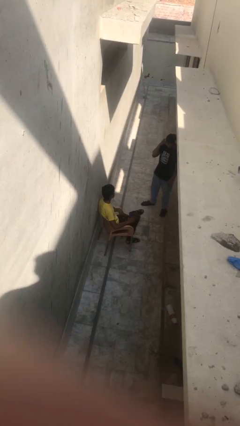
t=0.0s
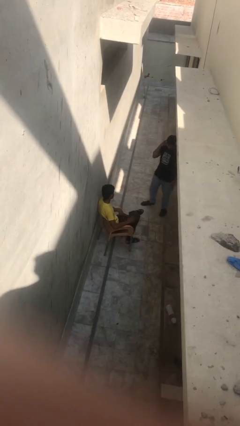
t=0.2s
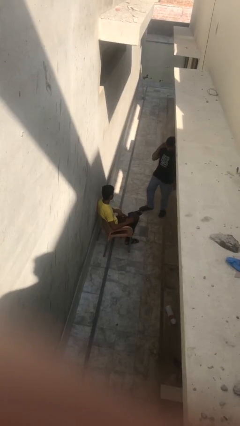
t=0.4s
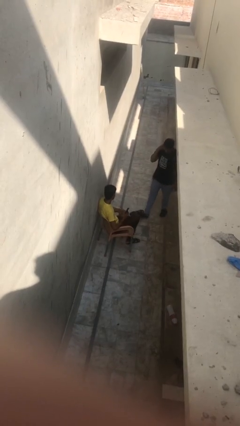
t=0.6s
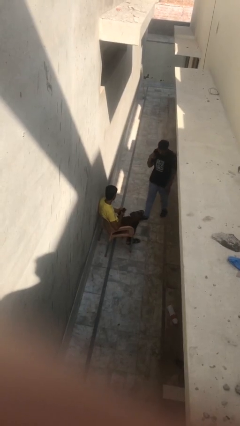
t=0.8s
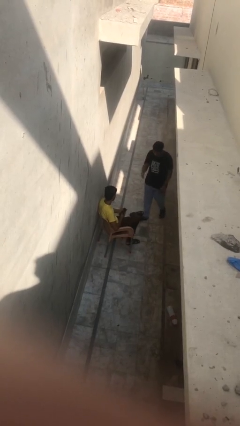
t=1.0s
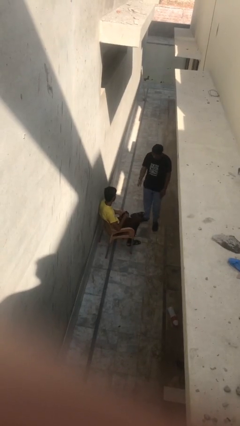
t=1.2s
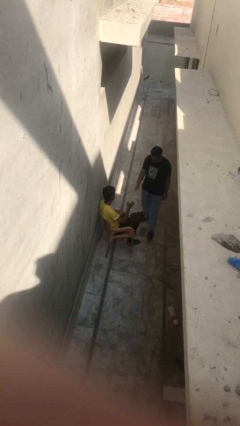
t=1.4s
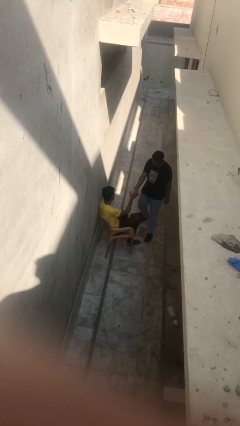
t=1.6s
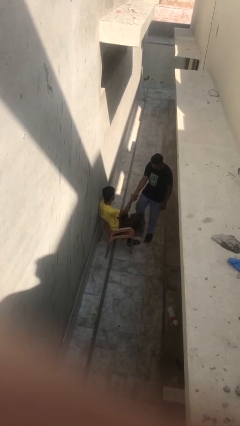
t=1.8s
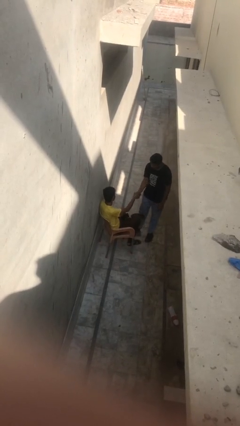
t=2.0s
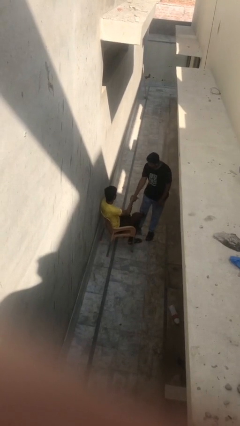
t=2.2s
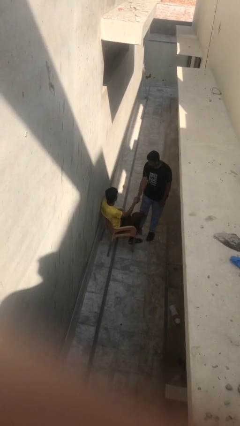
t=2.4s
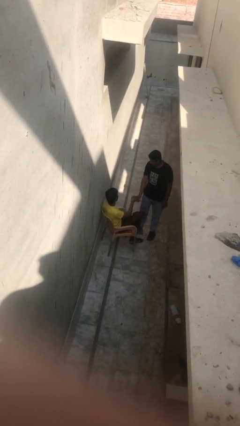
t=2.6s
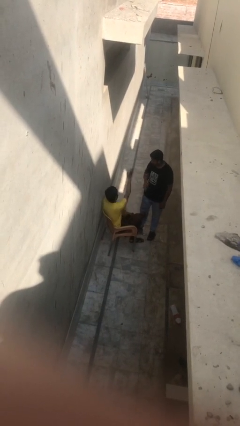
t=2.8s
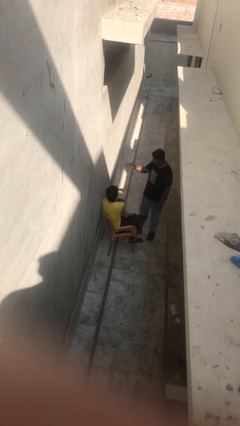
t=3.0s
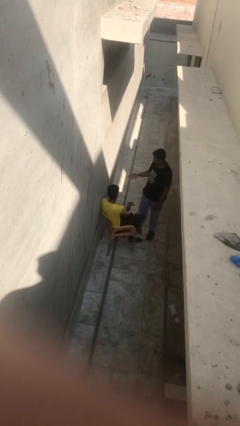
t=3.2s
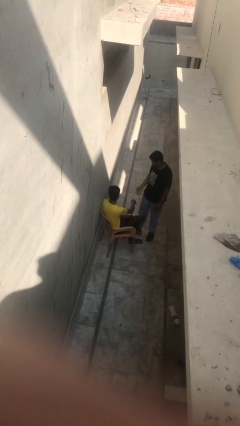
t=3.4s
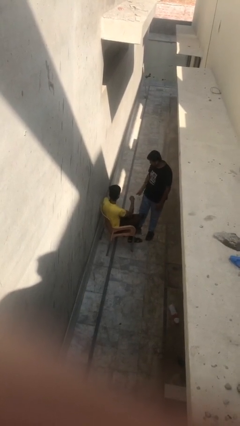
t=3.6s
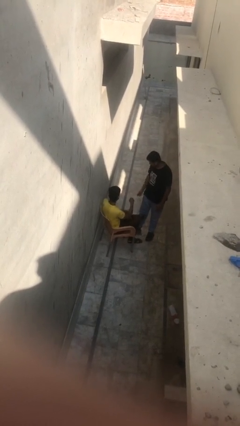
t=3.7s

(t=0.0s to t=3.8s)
person shakes hand

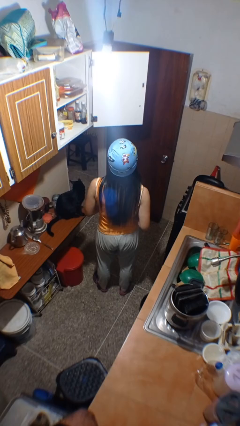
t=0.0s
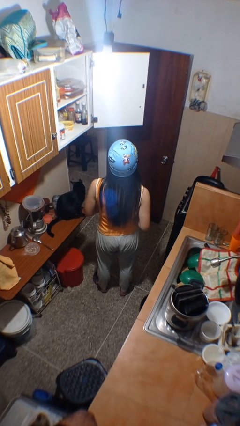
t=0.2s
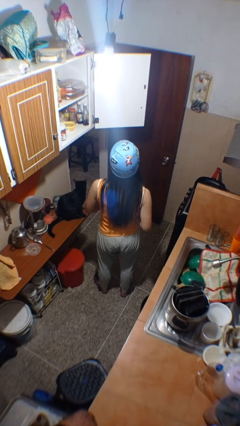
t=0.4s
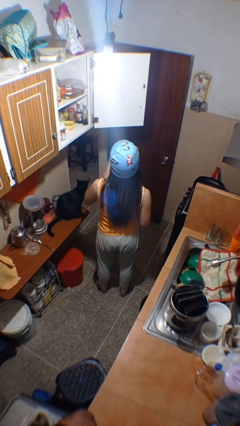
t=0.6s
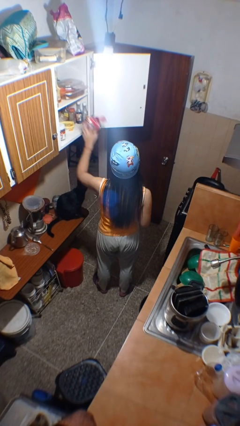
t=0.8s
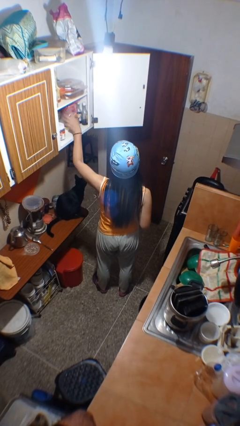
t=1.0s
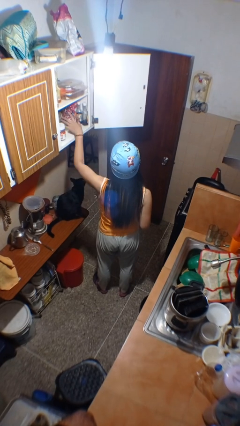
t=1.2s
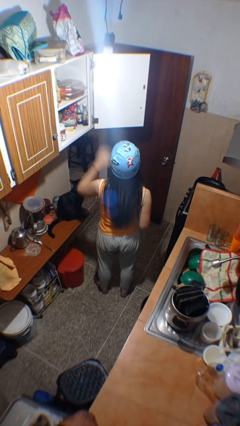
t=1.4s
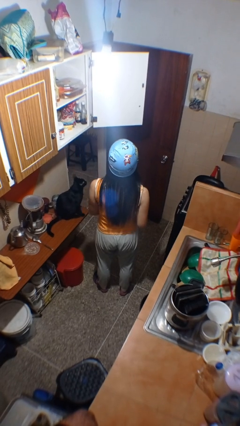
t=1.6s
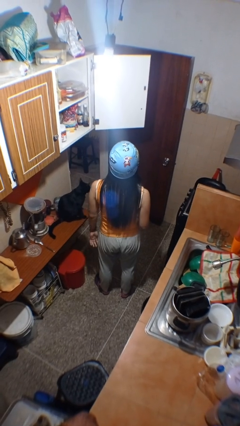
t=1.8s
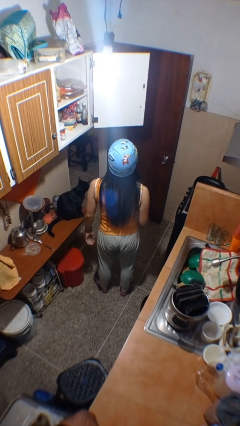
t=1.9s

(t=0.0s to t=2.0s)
person puts down object into cabinet

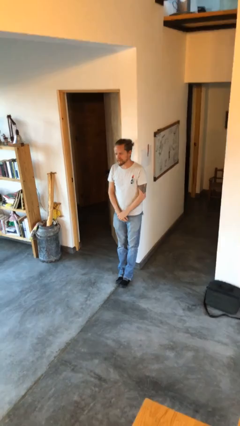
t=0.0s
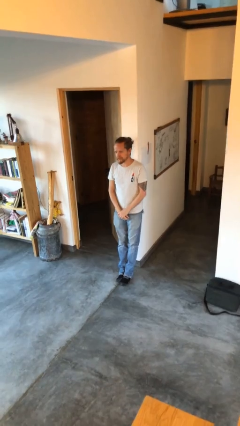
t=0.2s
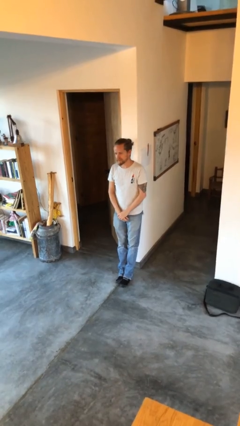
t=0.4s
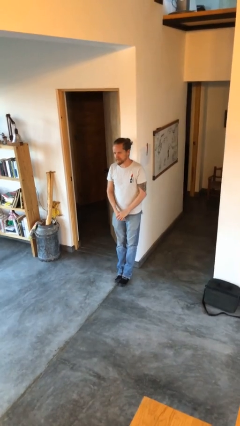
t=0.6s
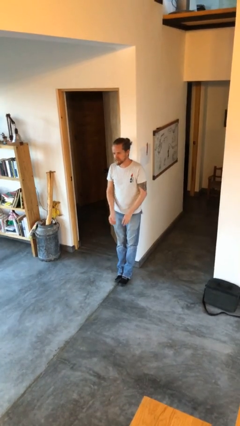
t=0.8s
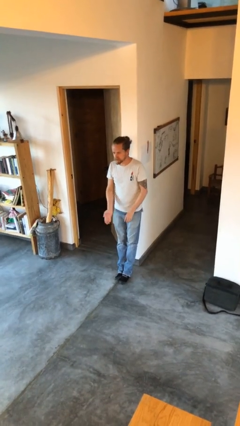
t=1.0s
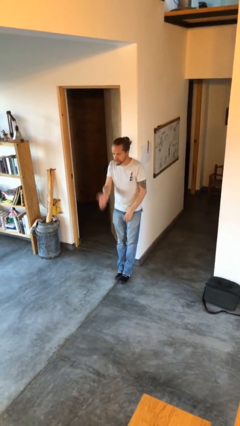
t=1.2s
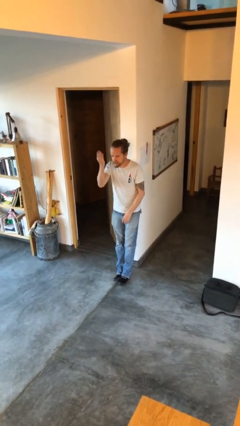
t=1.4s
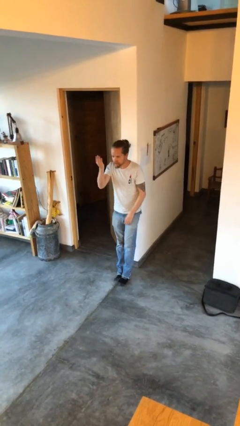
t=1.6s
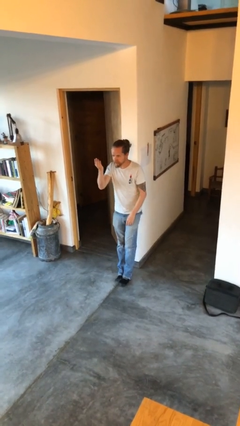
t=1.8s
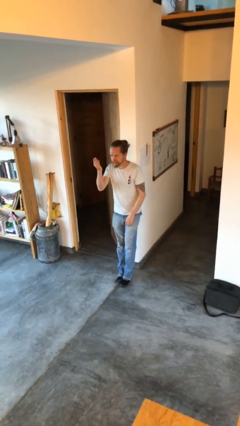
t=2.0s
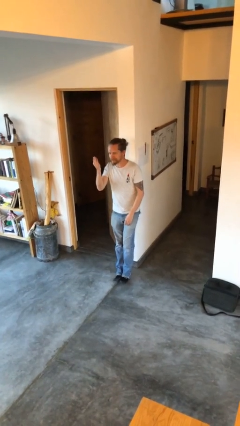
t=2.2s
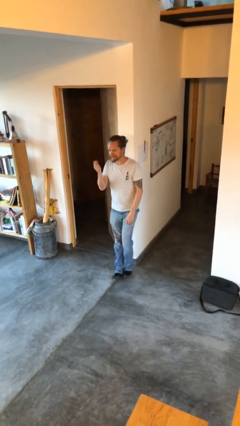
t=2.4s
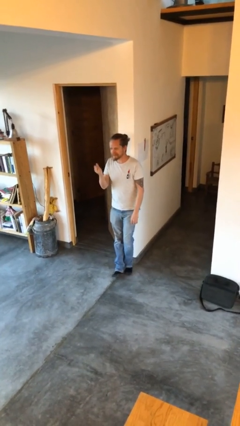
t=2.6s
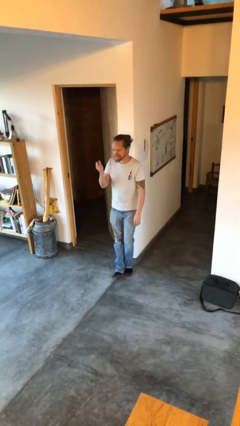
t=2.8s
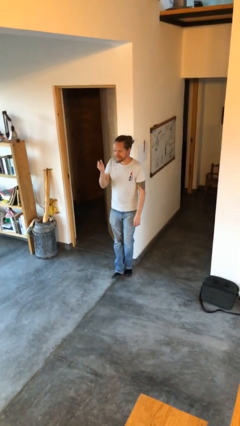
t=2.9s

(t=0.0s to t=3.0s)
person gestures swipe up

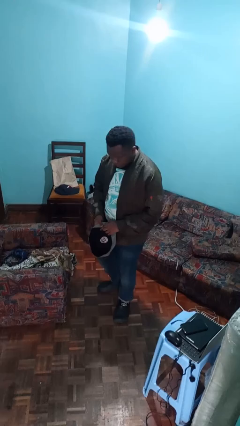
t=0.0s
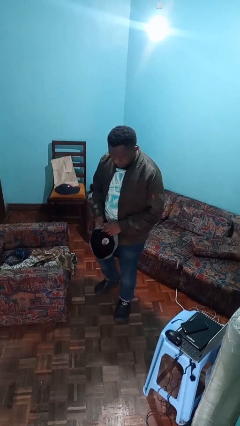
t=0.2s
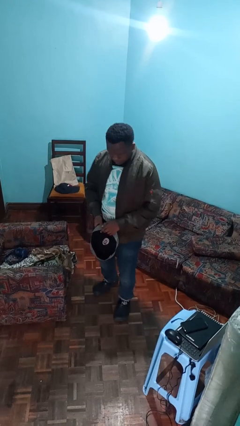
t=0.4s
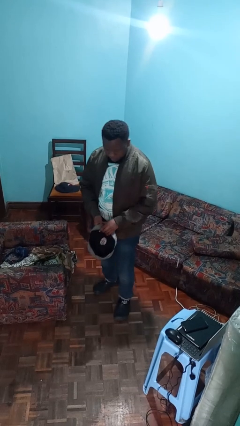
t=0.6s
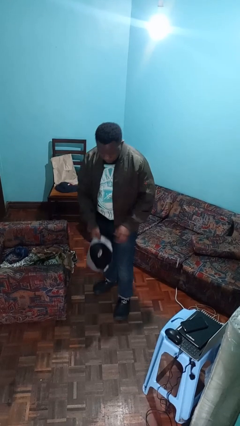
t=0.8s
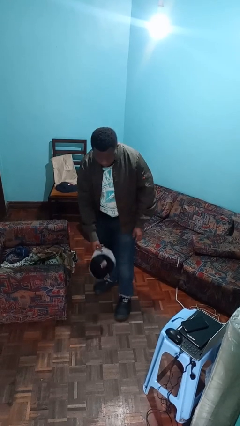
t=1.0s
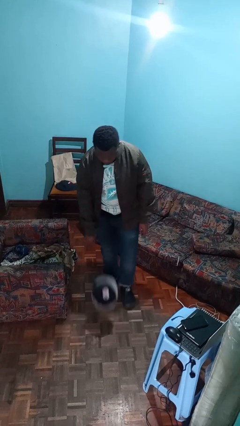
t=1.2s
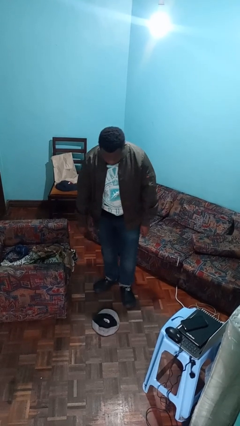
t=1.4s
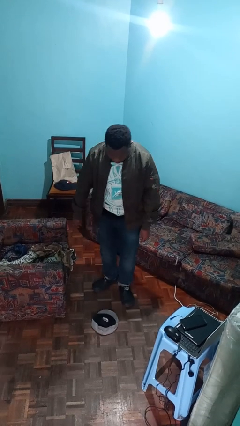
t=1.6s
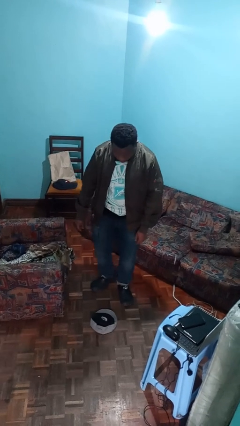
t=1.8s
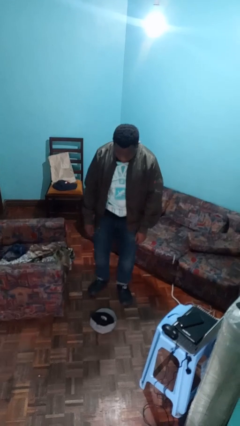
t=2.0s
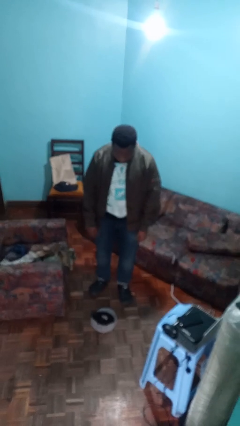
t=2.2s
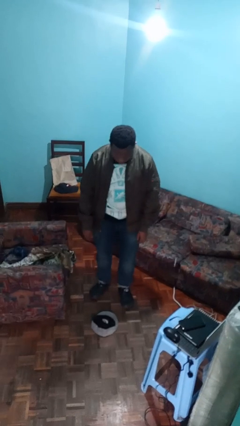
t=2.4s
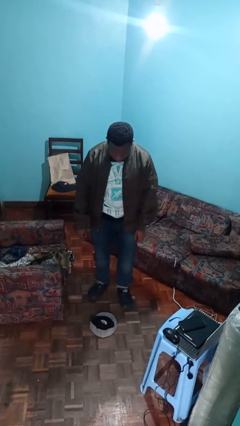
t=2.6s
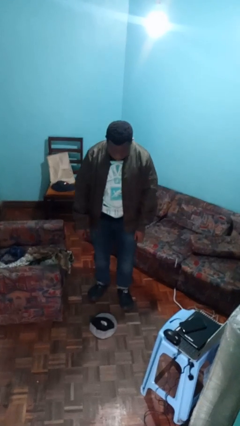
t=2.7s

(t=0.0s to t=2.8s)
person drops object

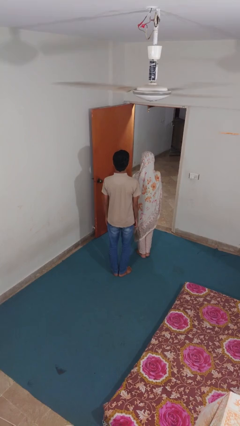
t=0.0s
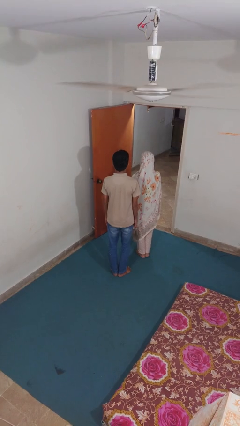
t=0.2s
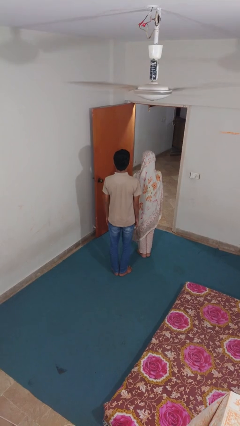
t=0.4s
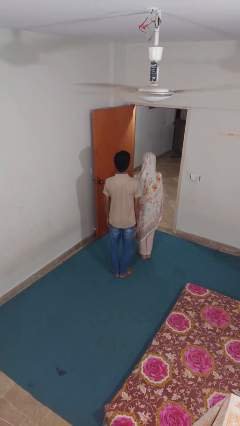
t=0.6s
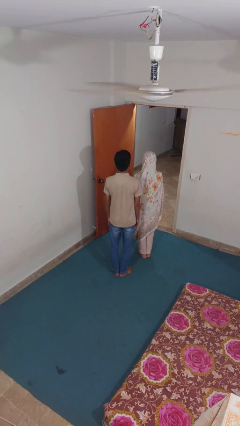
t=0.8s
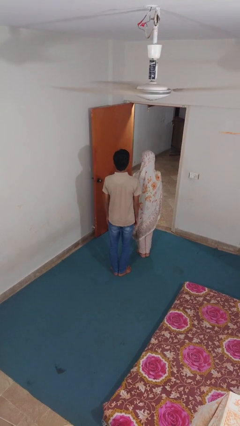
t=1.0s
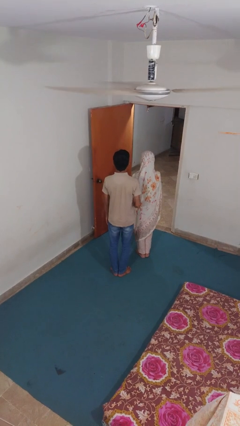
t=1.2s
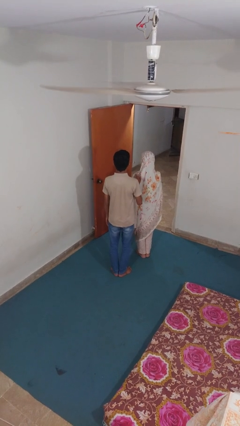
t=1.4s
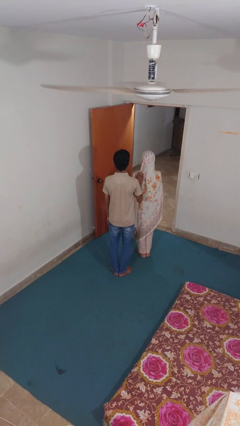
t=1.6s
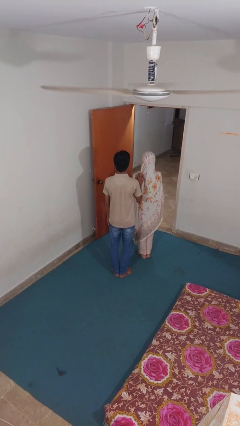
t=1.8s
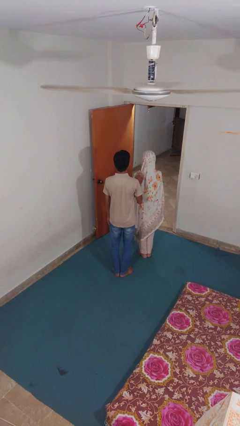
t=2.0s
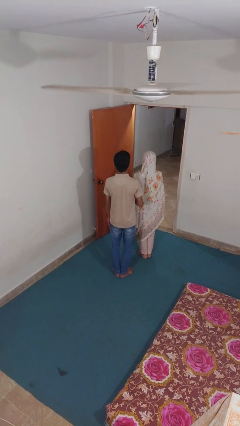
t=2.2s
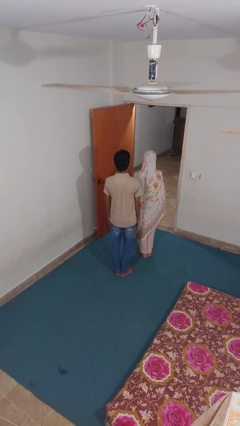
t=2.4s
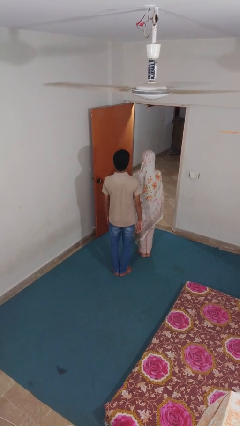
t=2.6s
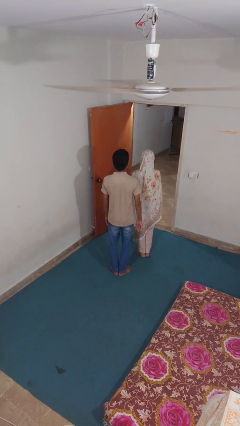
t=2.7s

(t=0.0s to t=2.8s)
person touches back of person

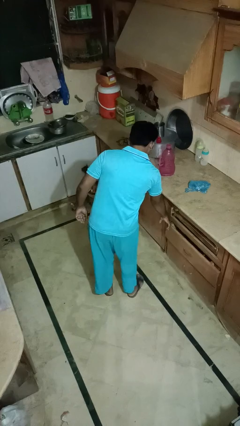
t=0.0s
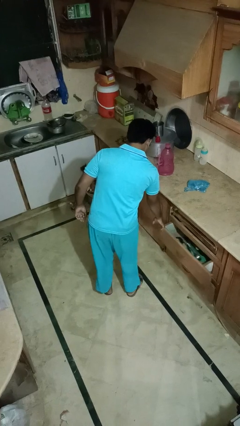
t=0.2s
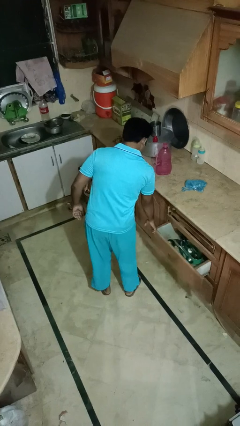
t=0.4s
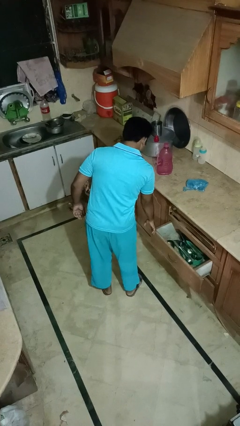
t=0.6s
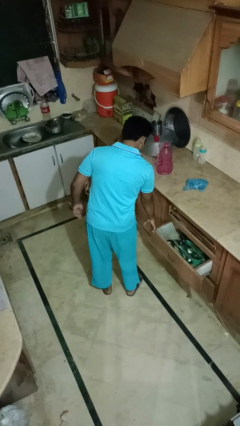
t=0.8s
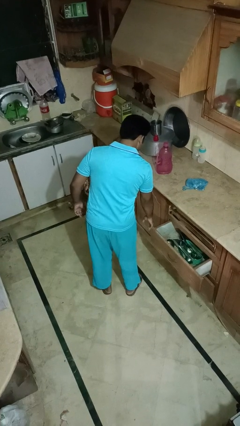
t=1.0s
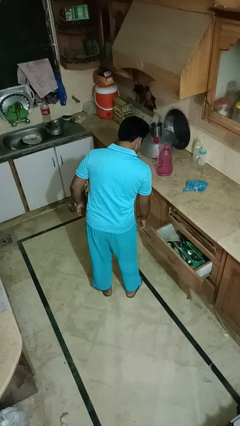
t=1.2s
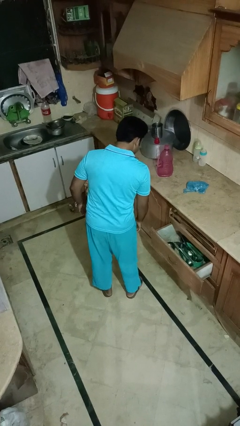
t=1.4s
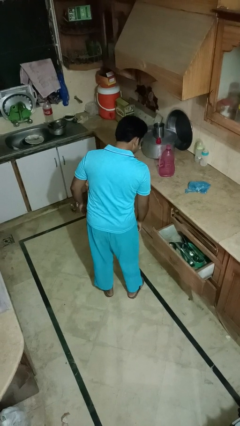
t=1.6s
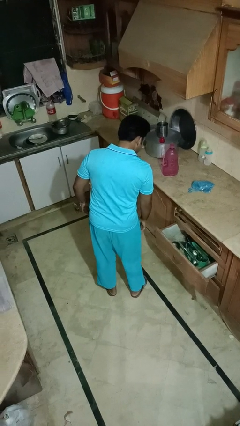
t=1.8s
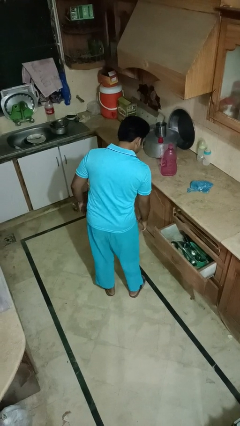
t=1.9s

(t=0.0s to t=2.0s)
person opens kitchen drawer

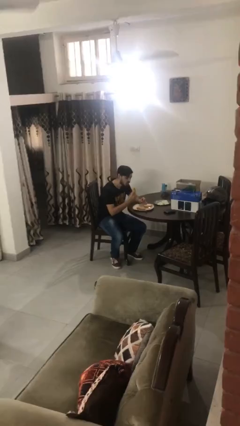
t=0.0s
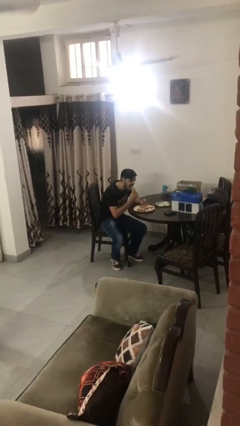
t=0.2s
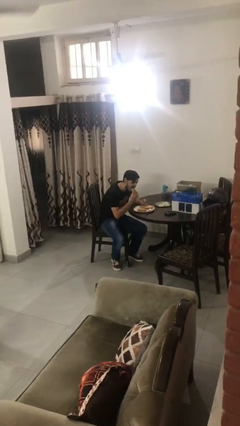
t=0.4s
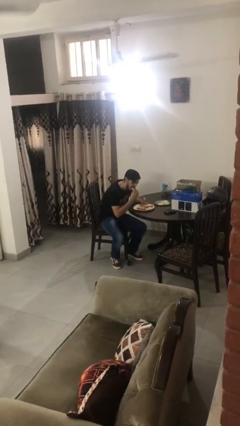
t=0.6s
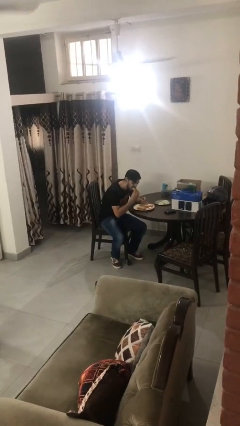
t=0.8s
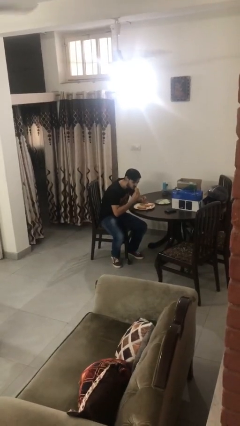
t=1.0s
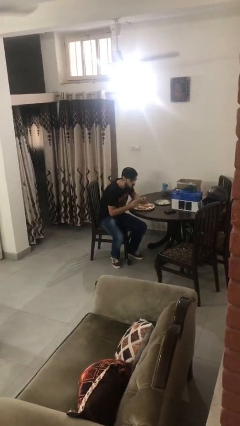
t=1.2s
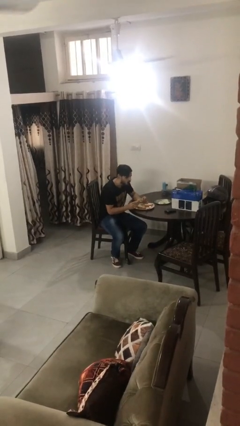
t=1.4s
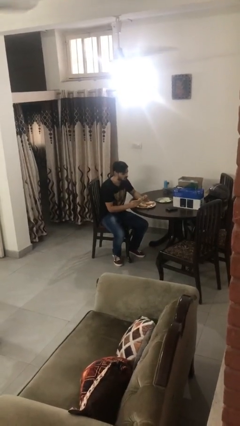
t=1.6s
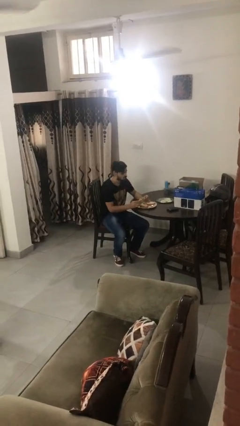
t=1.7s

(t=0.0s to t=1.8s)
person eats with hands
